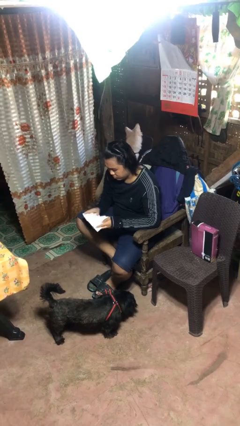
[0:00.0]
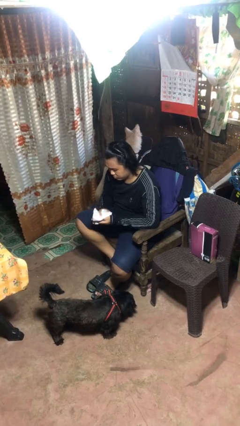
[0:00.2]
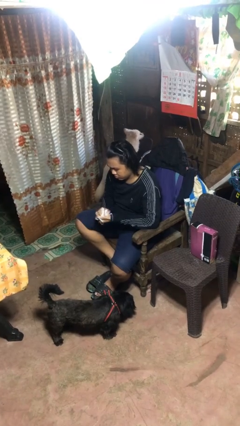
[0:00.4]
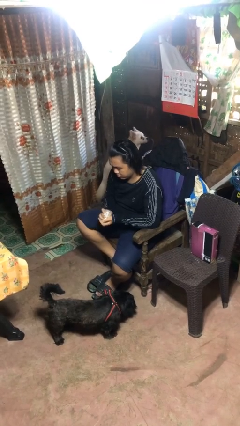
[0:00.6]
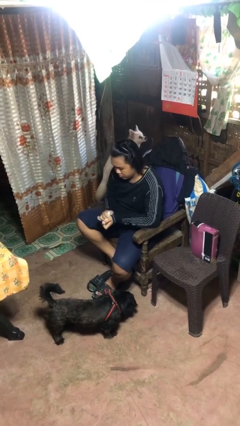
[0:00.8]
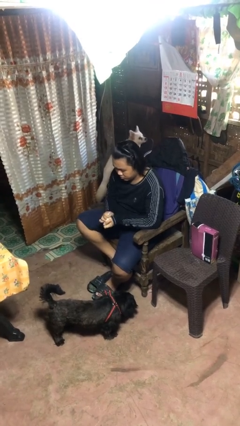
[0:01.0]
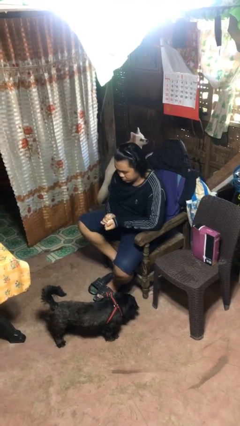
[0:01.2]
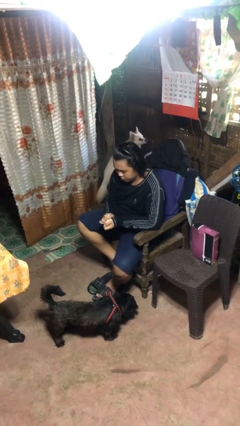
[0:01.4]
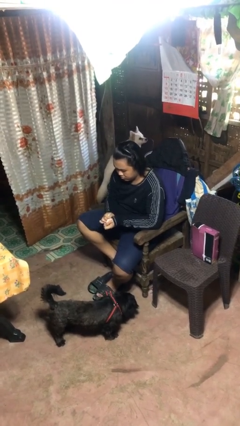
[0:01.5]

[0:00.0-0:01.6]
person crumples paper

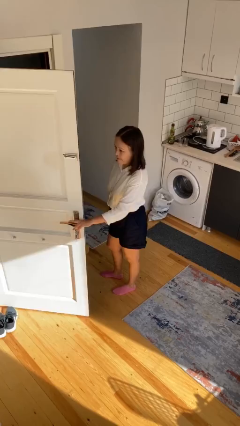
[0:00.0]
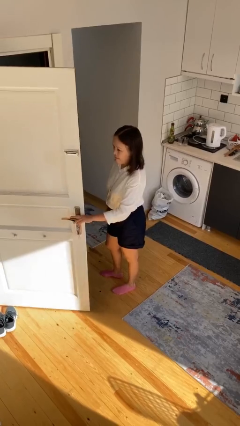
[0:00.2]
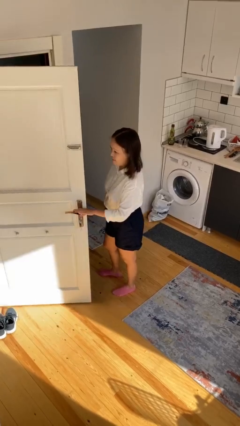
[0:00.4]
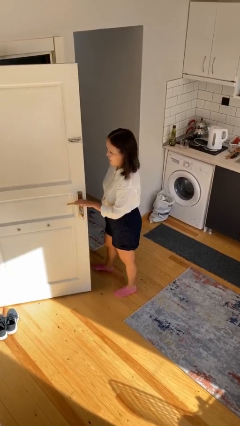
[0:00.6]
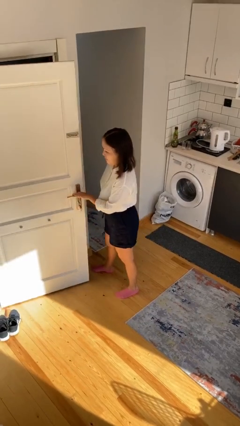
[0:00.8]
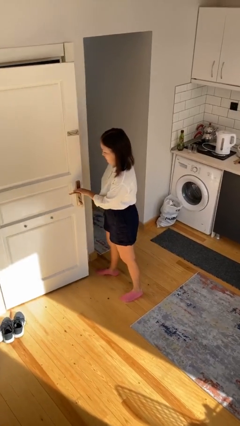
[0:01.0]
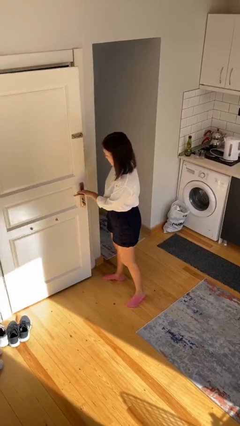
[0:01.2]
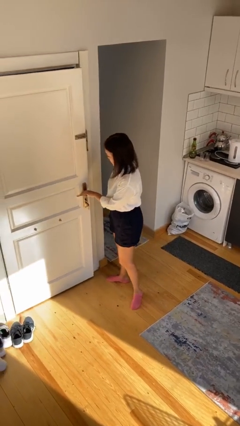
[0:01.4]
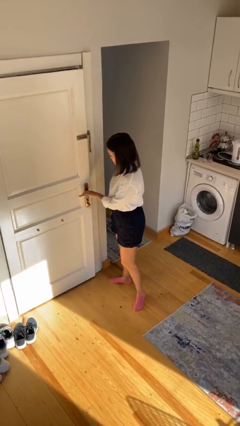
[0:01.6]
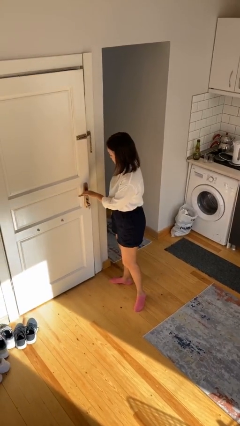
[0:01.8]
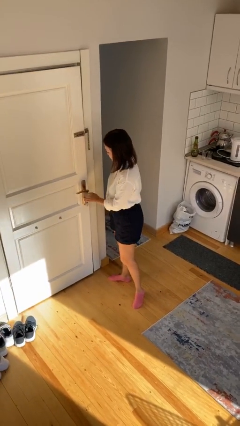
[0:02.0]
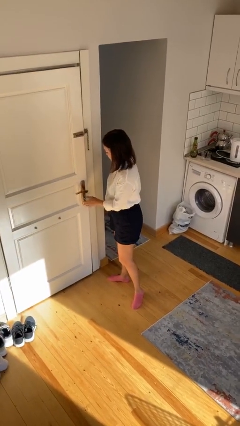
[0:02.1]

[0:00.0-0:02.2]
person closes facility door

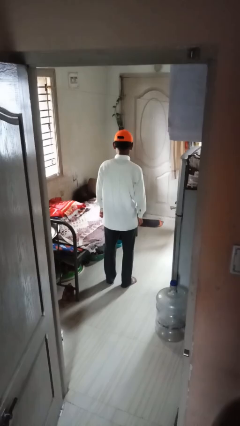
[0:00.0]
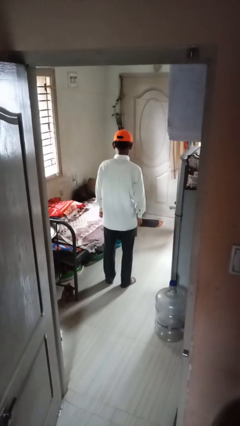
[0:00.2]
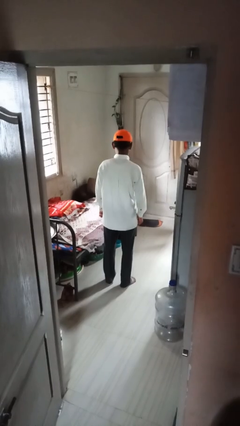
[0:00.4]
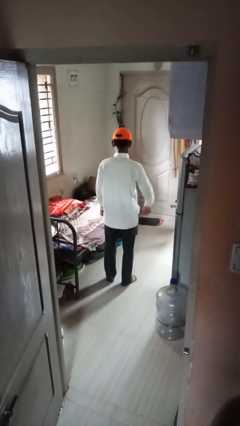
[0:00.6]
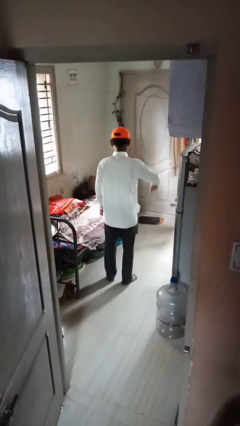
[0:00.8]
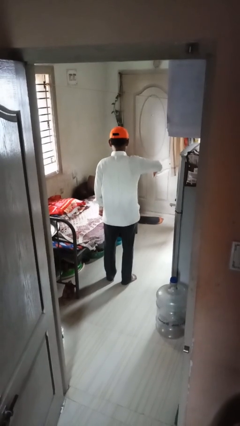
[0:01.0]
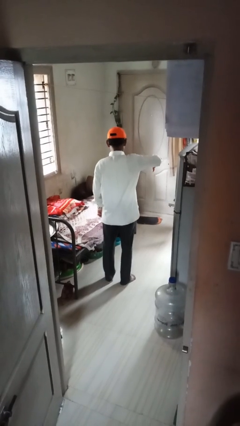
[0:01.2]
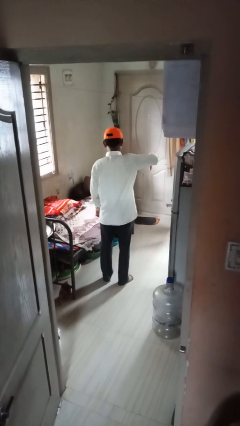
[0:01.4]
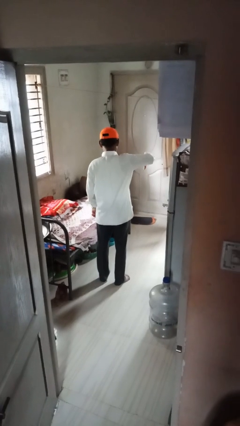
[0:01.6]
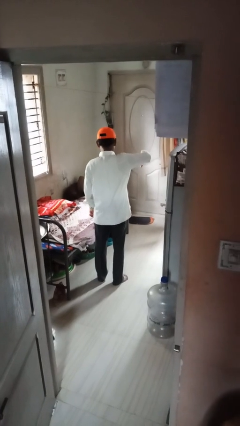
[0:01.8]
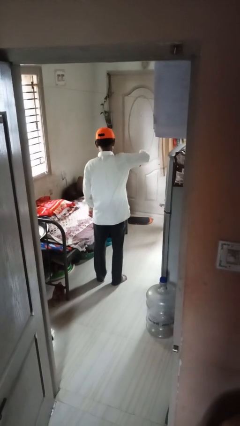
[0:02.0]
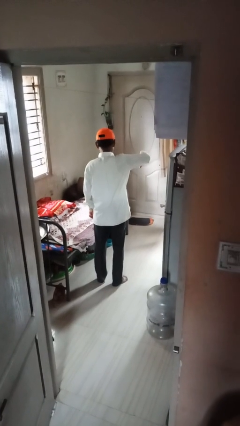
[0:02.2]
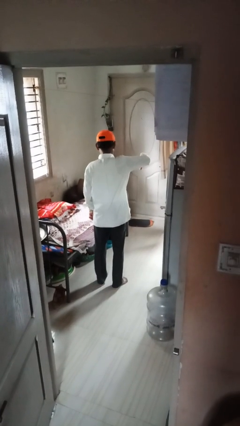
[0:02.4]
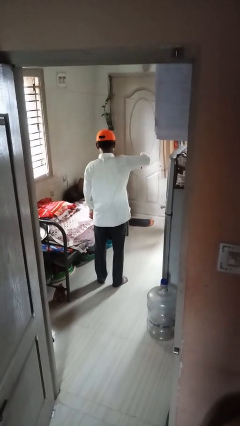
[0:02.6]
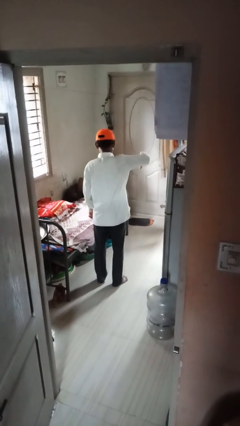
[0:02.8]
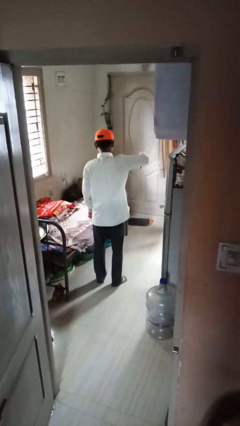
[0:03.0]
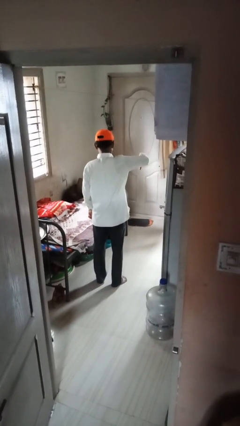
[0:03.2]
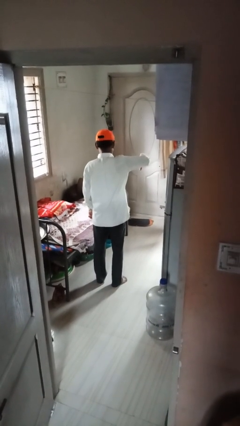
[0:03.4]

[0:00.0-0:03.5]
person gestures thumbs down

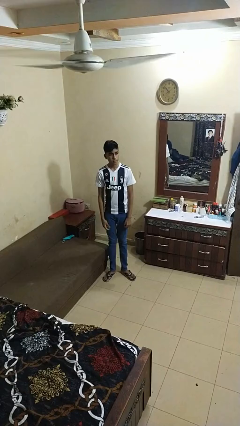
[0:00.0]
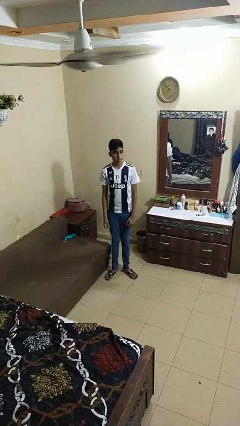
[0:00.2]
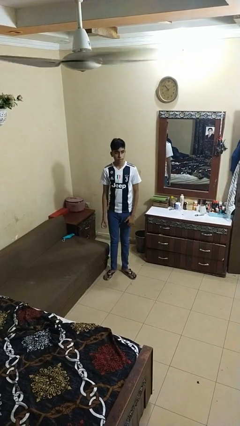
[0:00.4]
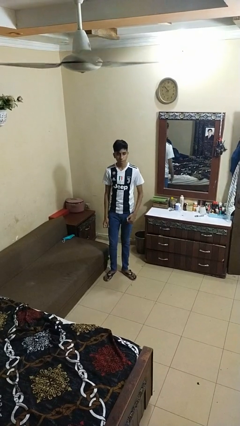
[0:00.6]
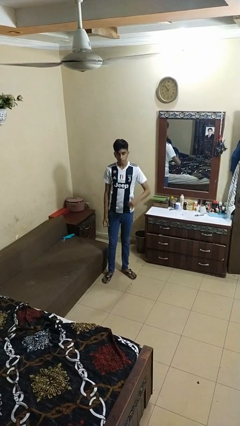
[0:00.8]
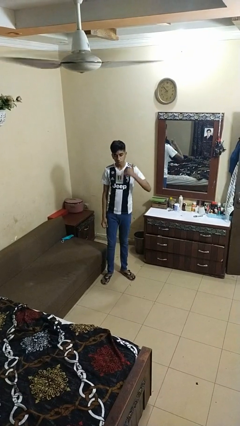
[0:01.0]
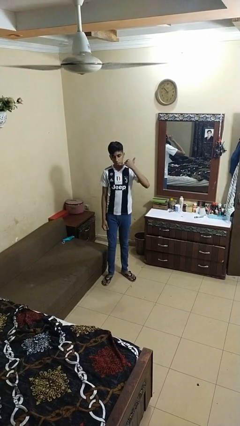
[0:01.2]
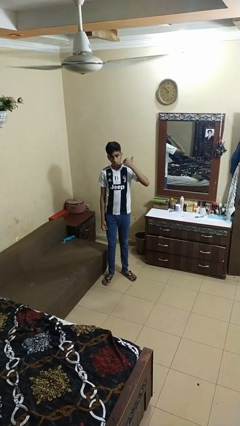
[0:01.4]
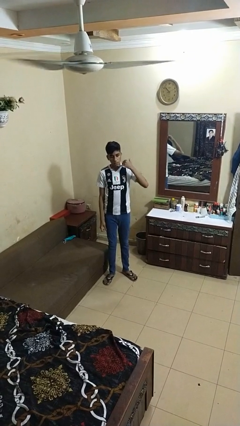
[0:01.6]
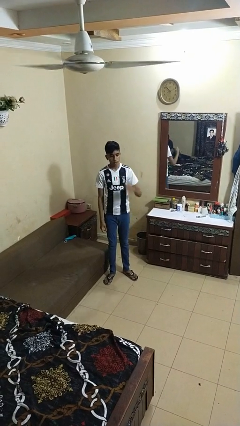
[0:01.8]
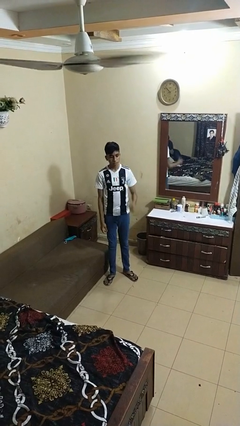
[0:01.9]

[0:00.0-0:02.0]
person gestures call me

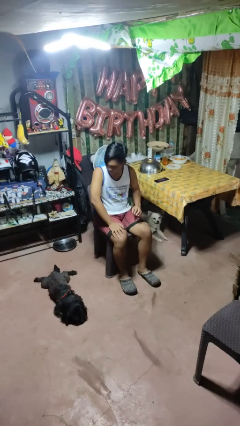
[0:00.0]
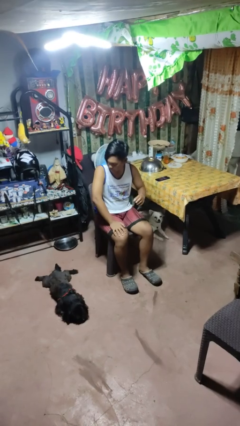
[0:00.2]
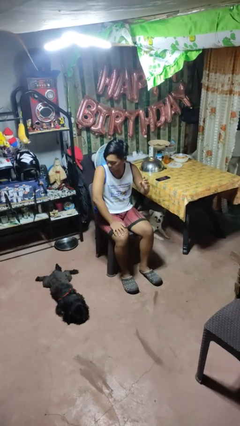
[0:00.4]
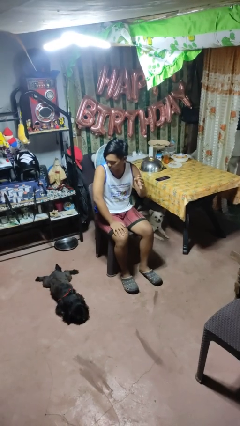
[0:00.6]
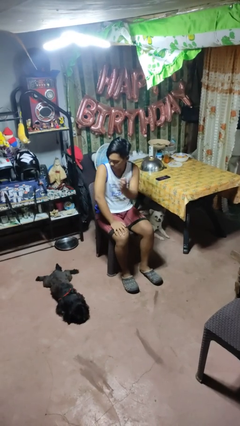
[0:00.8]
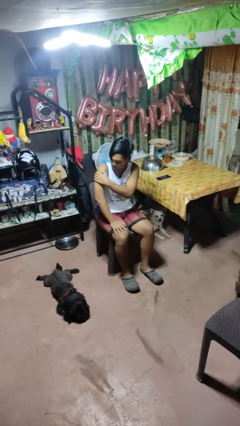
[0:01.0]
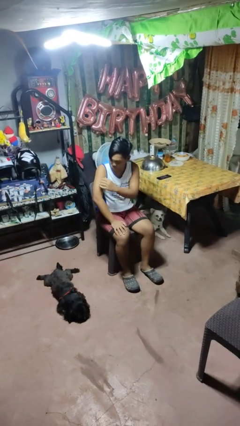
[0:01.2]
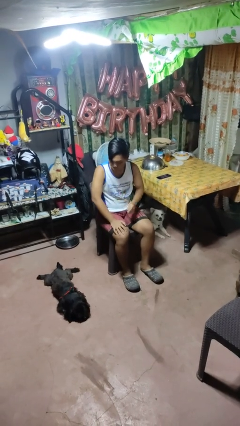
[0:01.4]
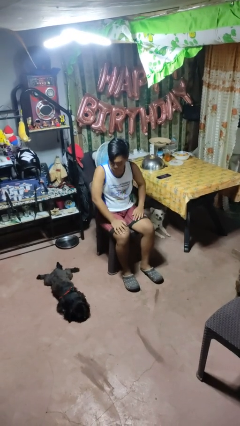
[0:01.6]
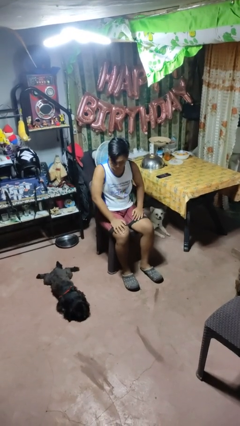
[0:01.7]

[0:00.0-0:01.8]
person swats bug

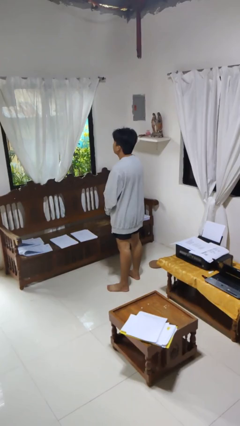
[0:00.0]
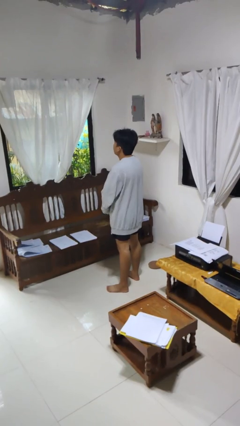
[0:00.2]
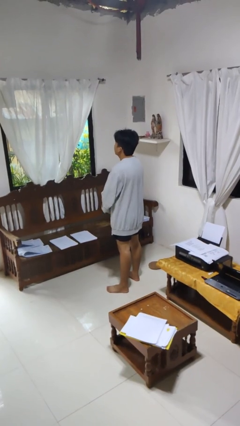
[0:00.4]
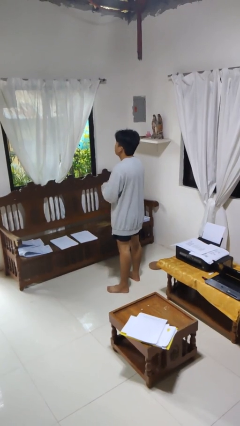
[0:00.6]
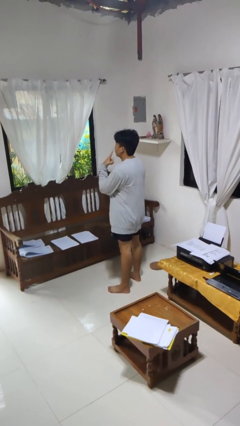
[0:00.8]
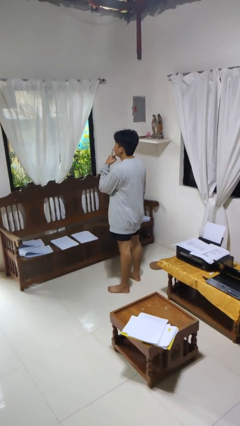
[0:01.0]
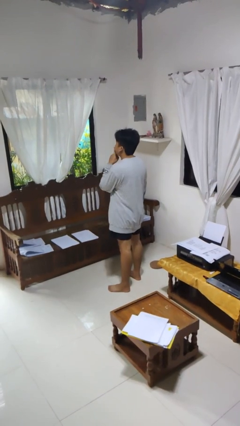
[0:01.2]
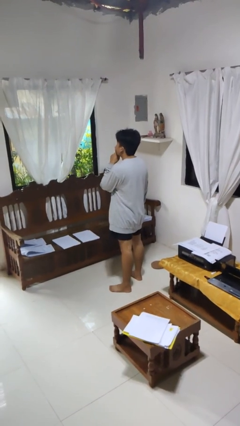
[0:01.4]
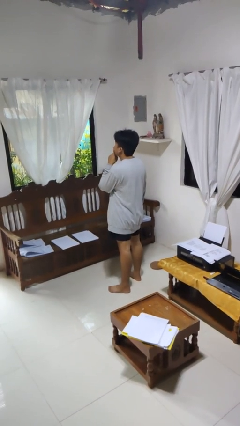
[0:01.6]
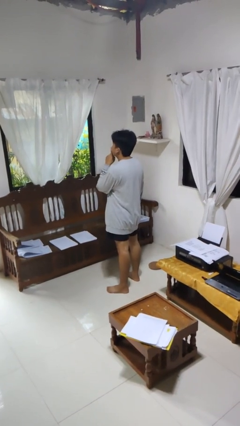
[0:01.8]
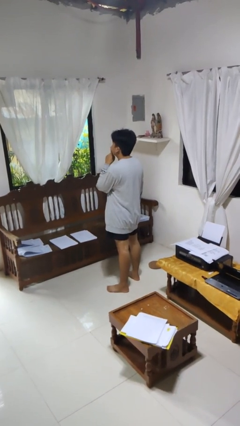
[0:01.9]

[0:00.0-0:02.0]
person gestures be quiet

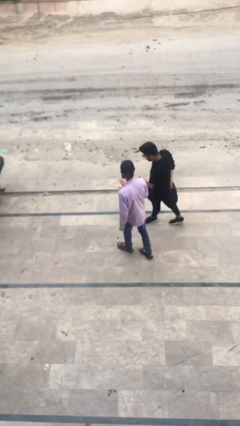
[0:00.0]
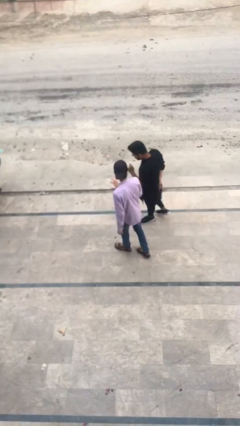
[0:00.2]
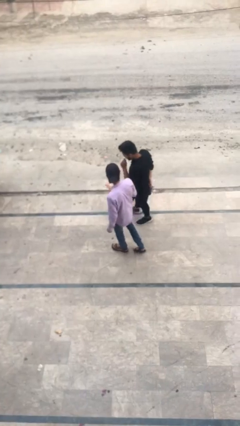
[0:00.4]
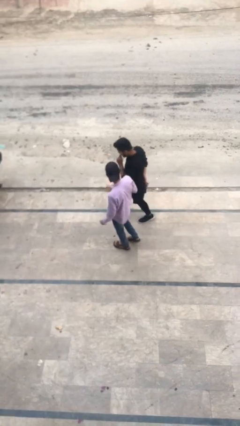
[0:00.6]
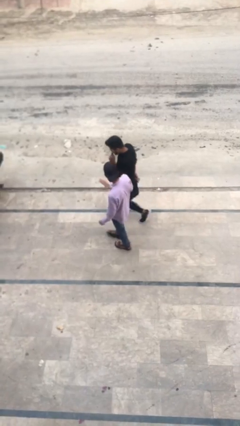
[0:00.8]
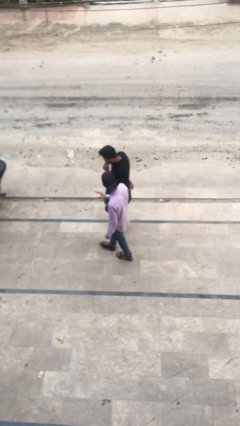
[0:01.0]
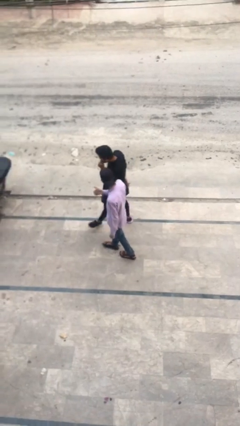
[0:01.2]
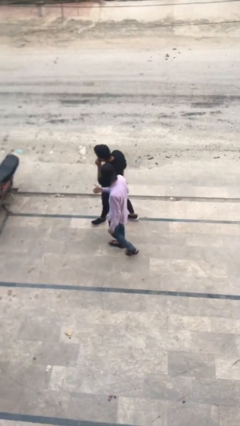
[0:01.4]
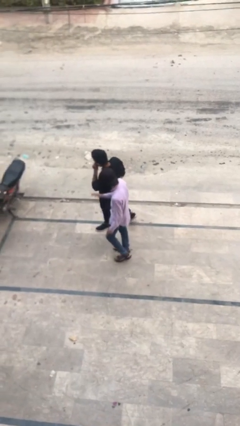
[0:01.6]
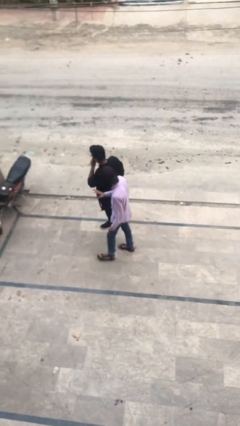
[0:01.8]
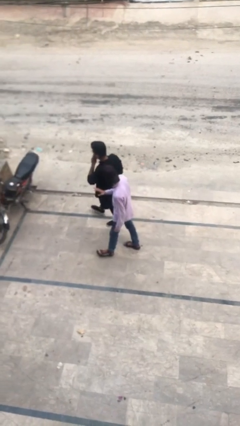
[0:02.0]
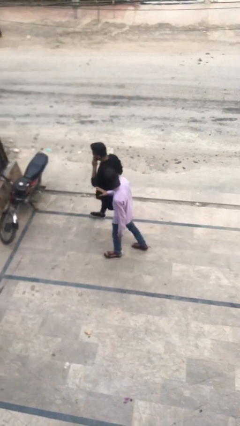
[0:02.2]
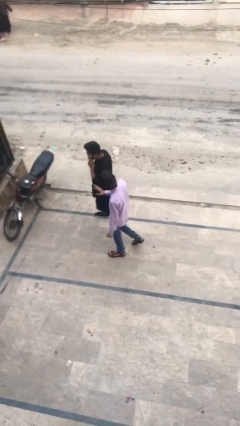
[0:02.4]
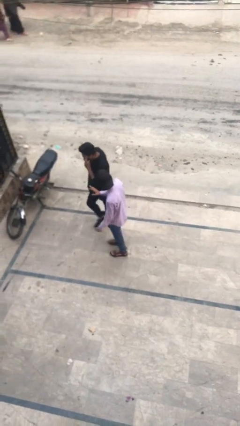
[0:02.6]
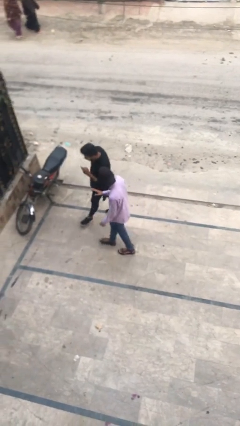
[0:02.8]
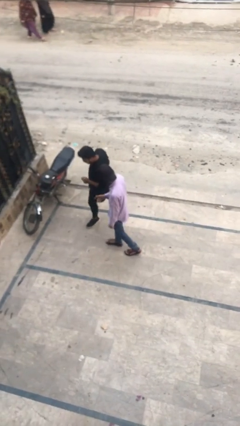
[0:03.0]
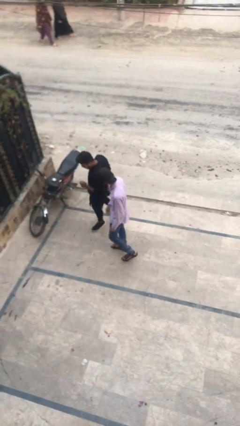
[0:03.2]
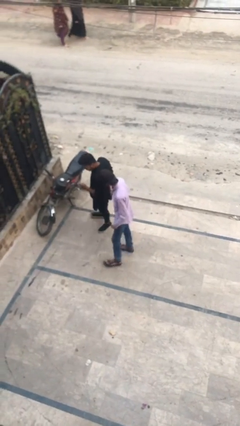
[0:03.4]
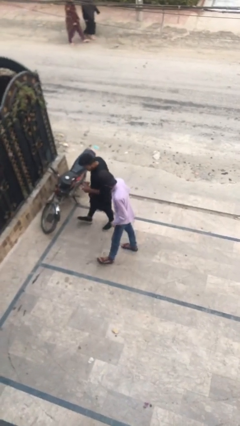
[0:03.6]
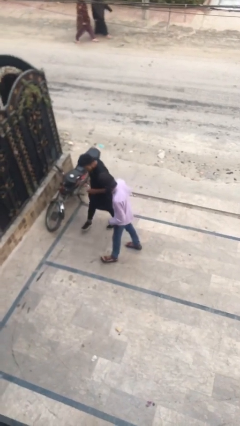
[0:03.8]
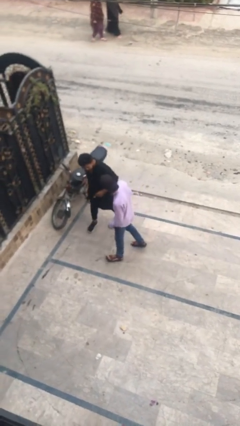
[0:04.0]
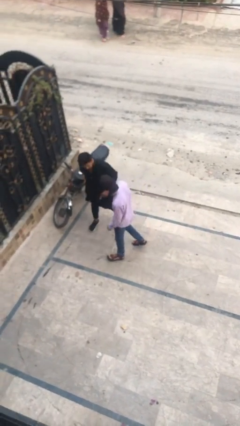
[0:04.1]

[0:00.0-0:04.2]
person talks to person
